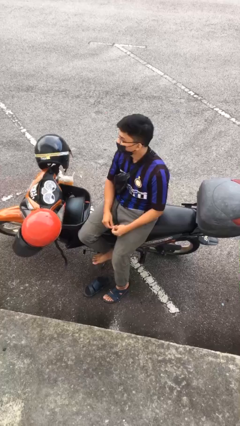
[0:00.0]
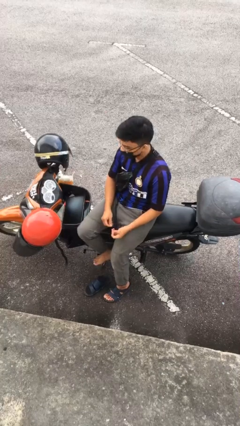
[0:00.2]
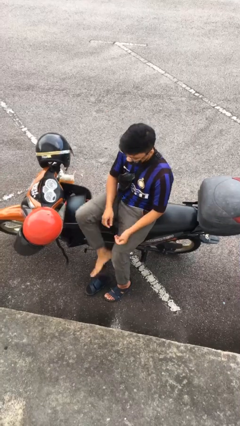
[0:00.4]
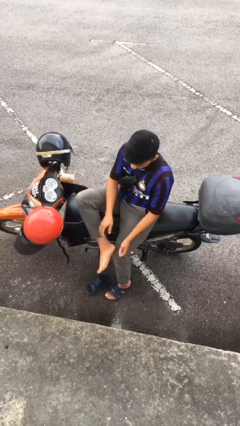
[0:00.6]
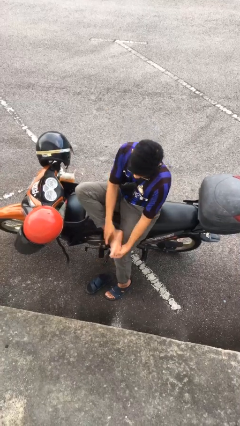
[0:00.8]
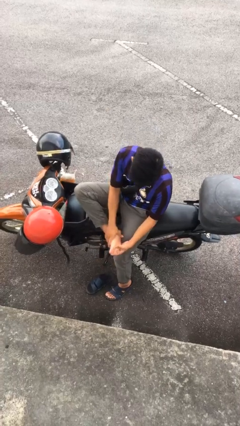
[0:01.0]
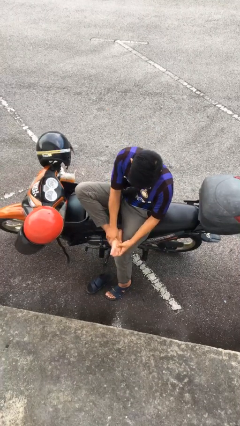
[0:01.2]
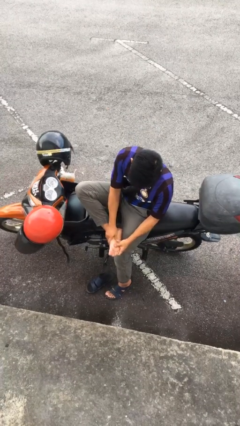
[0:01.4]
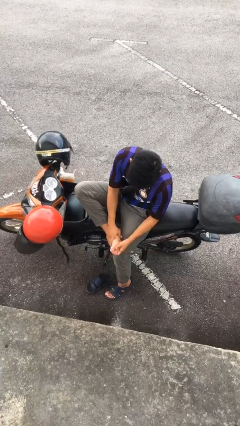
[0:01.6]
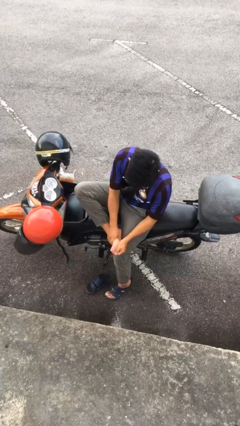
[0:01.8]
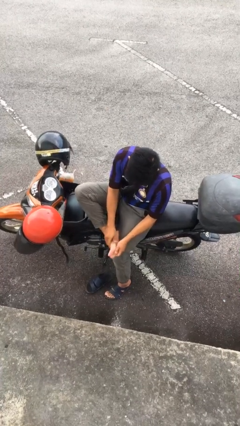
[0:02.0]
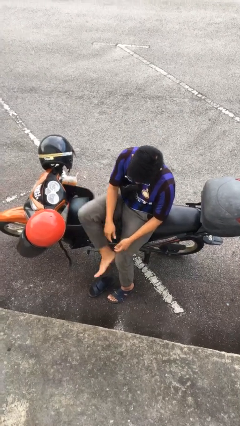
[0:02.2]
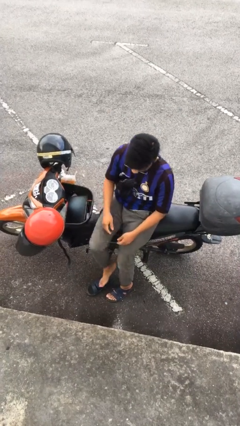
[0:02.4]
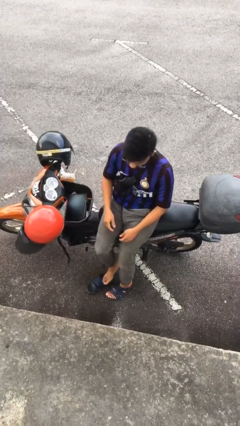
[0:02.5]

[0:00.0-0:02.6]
person rubs foot

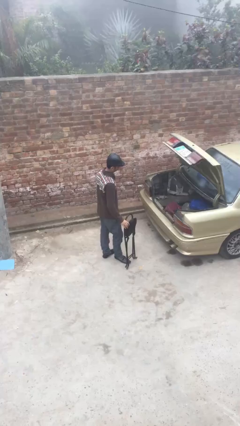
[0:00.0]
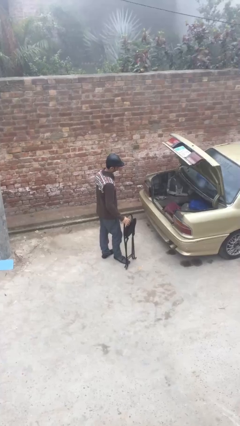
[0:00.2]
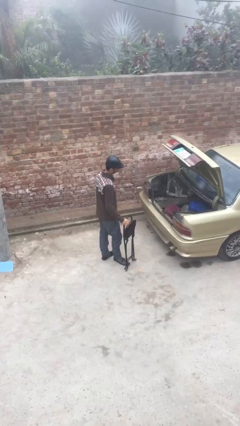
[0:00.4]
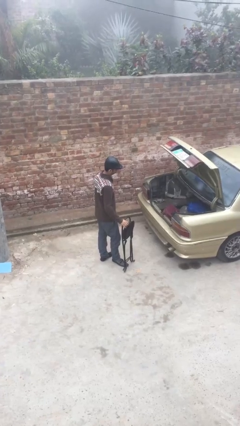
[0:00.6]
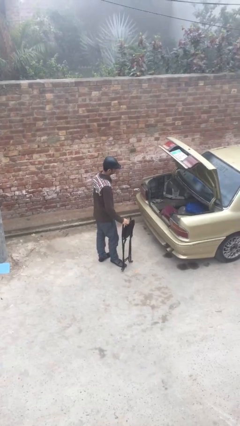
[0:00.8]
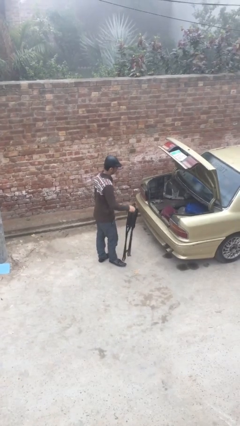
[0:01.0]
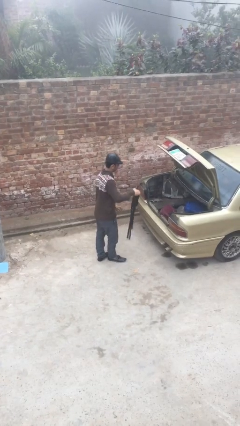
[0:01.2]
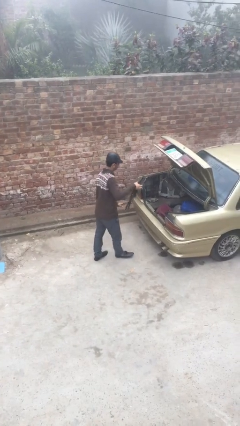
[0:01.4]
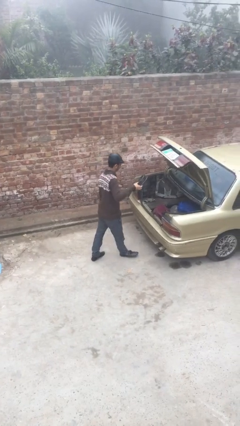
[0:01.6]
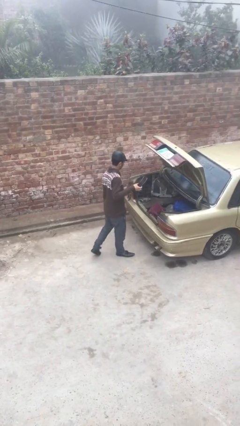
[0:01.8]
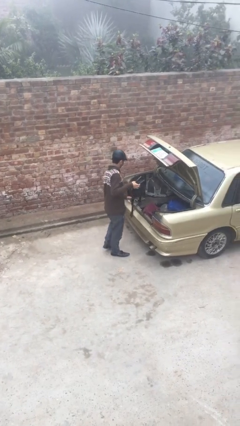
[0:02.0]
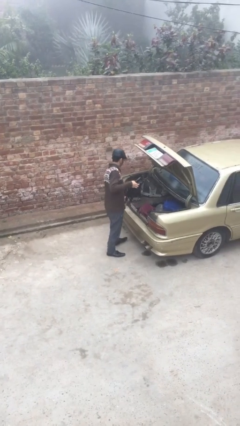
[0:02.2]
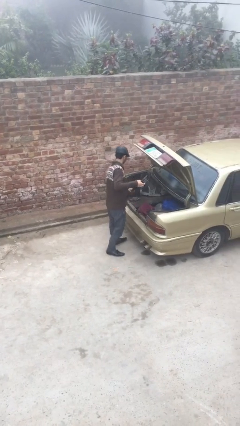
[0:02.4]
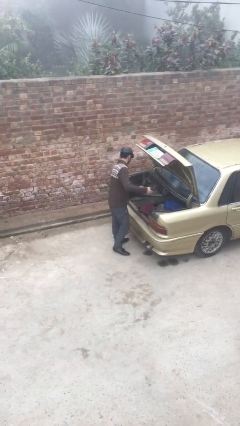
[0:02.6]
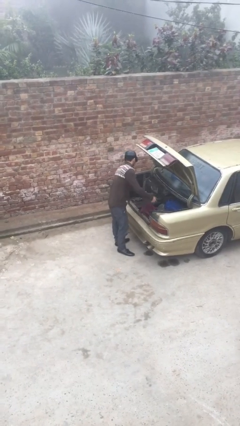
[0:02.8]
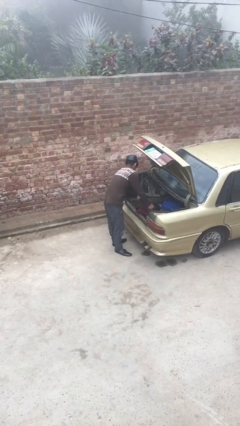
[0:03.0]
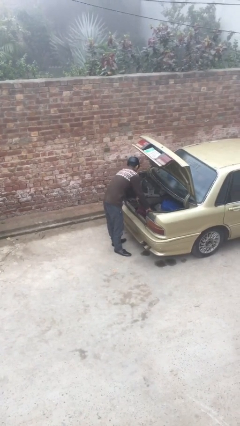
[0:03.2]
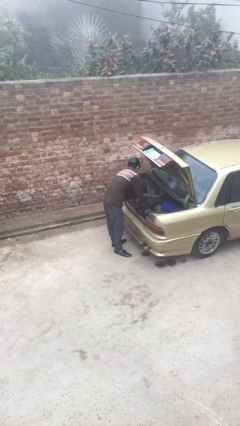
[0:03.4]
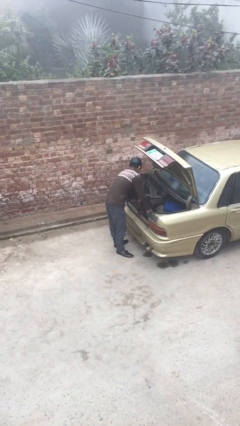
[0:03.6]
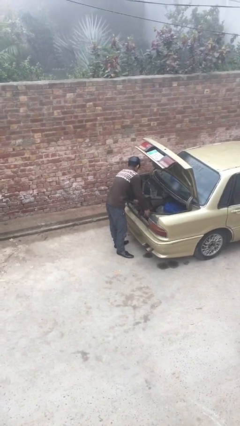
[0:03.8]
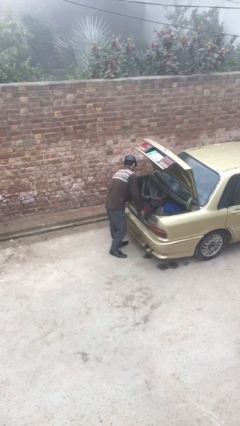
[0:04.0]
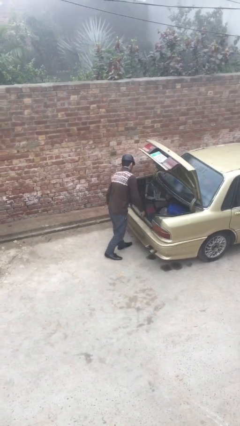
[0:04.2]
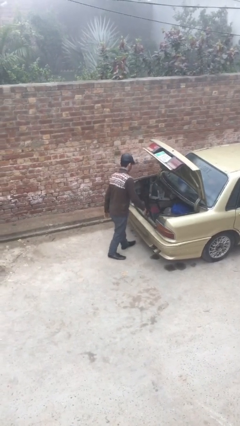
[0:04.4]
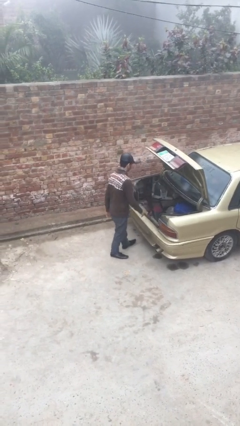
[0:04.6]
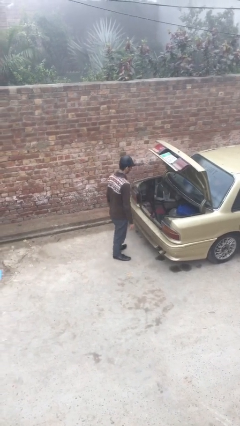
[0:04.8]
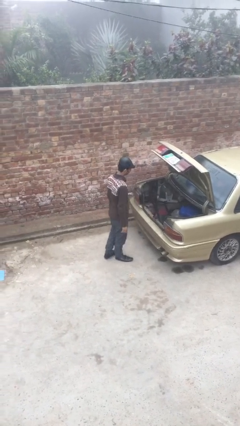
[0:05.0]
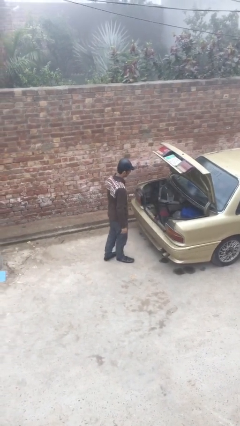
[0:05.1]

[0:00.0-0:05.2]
person loads car

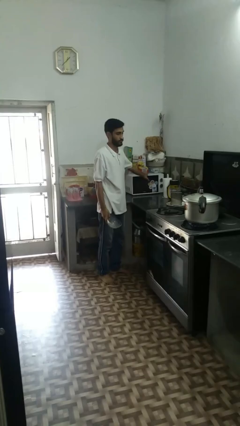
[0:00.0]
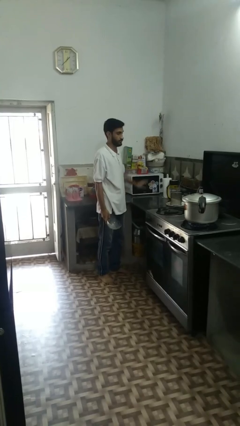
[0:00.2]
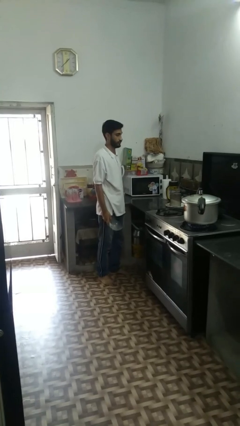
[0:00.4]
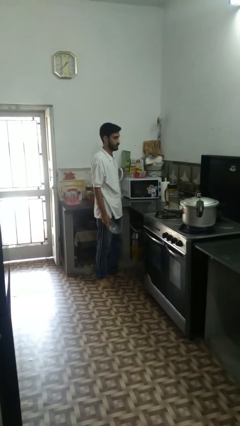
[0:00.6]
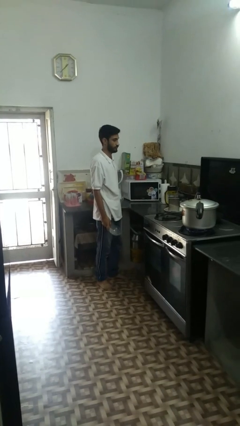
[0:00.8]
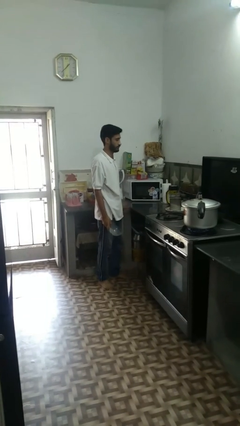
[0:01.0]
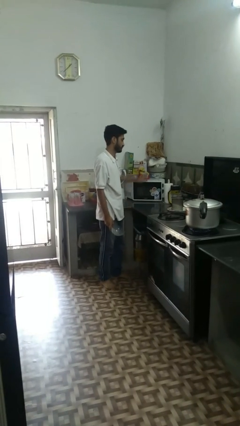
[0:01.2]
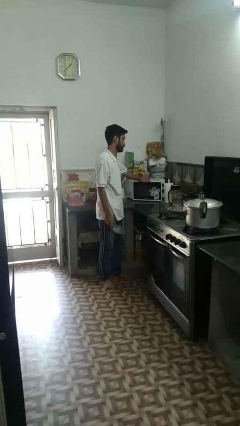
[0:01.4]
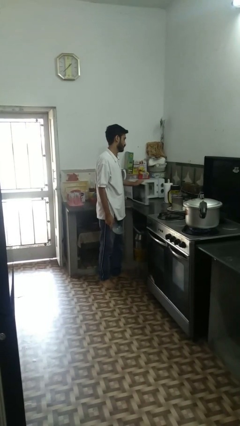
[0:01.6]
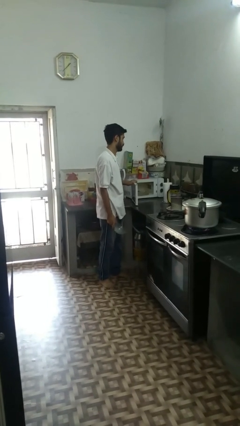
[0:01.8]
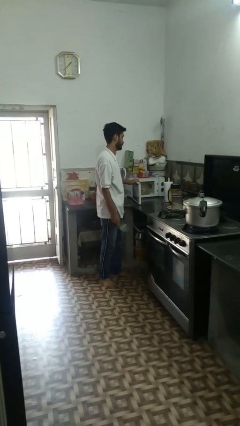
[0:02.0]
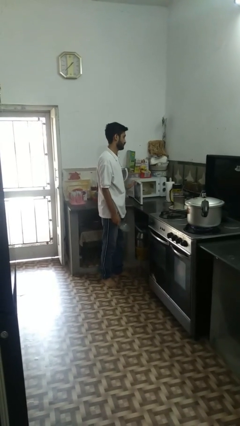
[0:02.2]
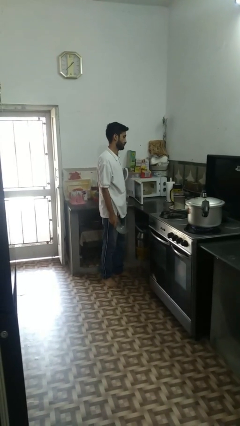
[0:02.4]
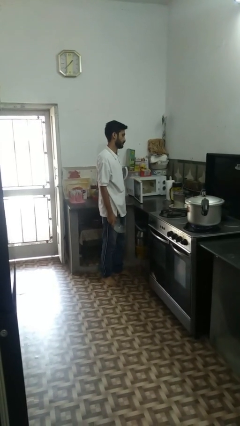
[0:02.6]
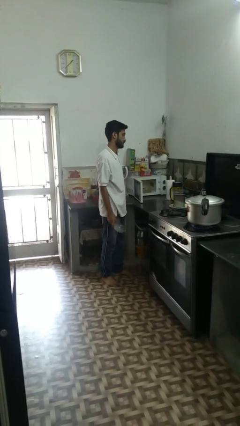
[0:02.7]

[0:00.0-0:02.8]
person opens microwave

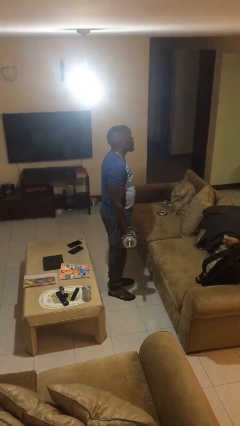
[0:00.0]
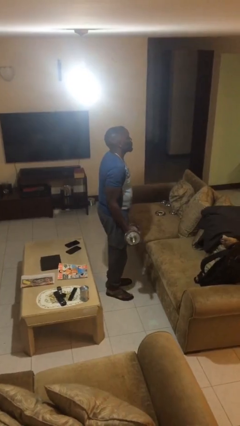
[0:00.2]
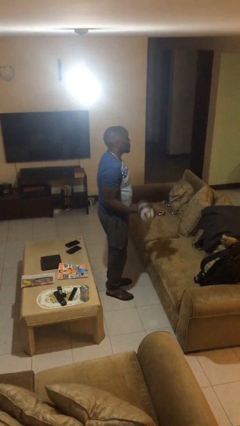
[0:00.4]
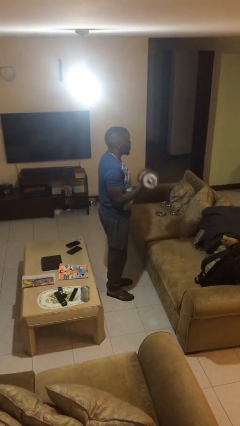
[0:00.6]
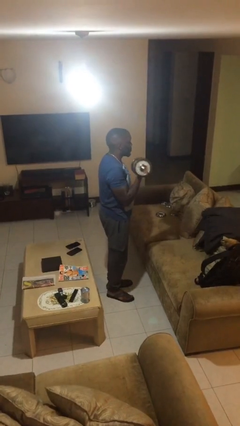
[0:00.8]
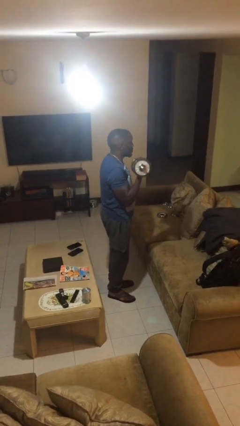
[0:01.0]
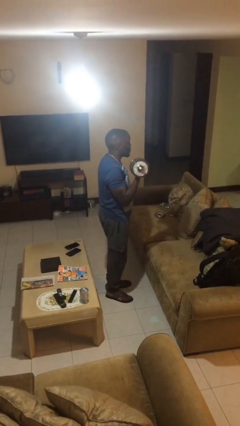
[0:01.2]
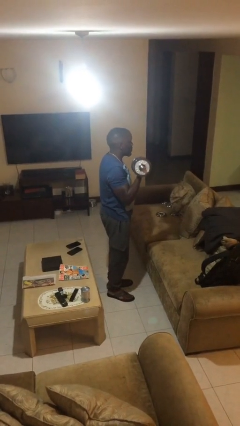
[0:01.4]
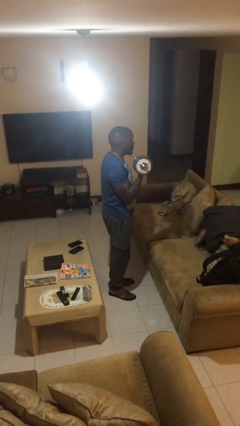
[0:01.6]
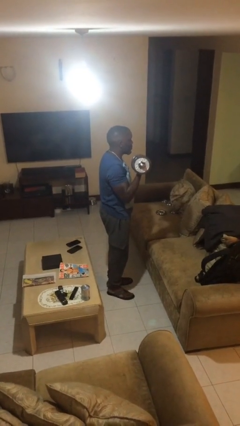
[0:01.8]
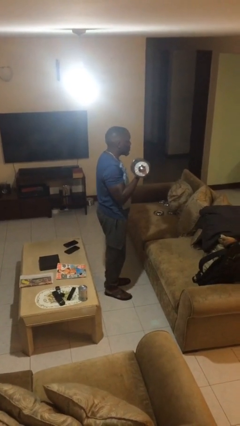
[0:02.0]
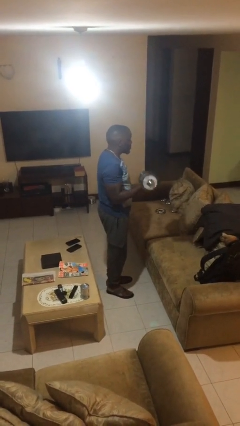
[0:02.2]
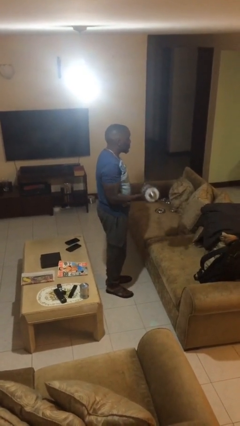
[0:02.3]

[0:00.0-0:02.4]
person lifts dumbbells

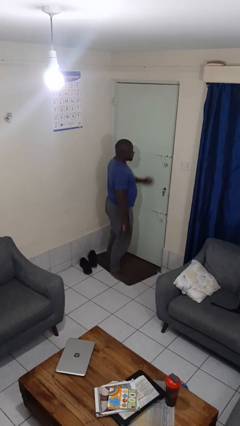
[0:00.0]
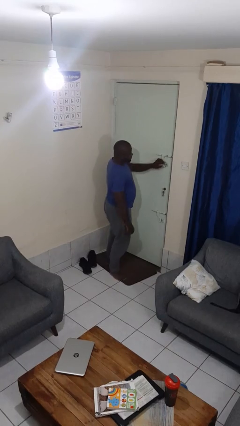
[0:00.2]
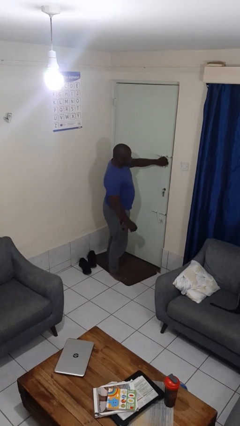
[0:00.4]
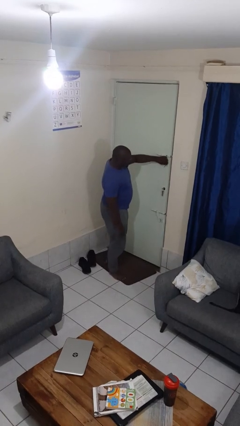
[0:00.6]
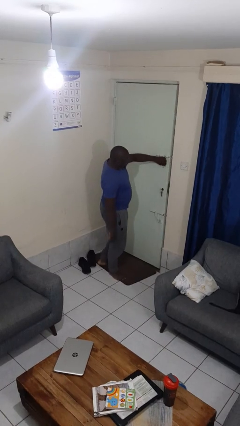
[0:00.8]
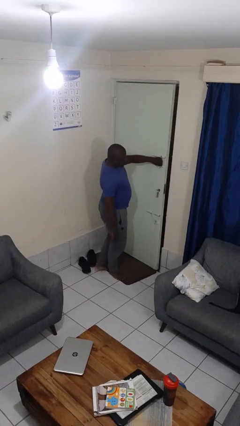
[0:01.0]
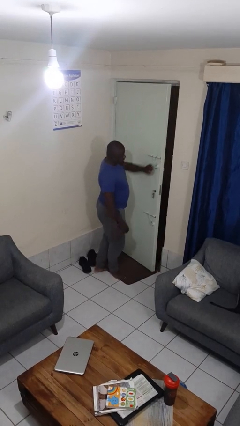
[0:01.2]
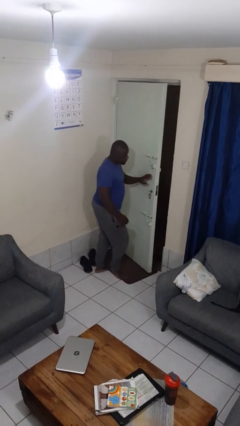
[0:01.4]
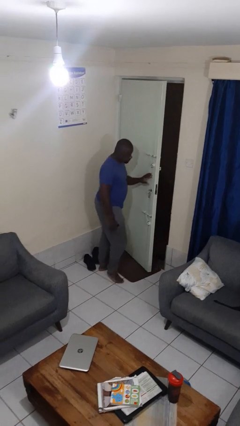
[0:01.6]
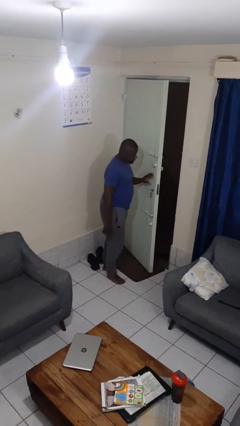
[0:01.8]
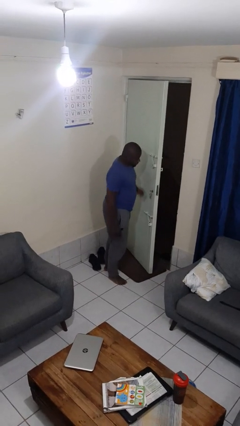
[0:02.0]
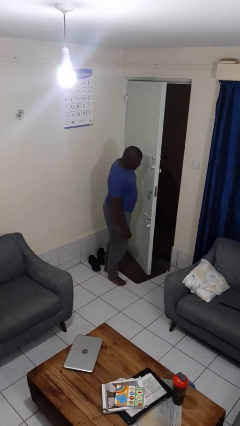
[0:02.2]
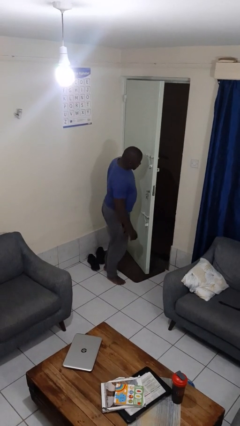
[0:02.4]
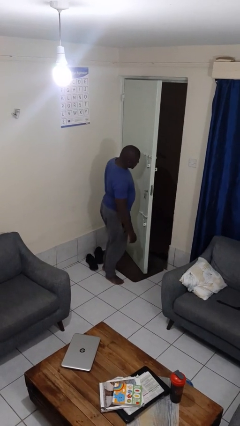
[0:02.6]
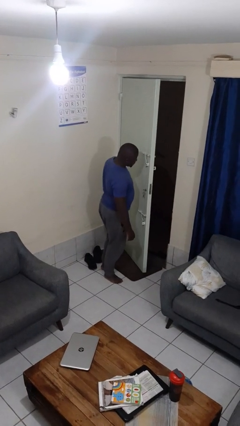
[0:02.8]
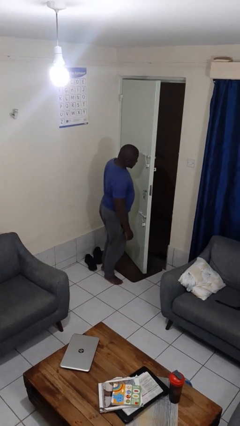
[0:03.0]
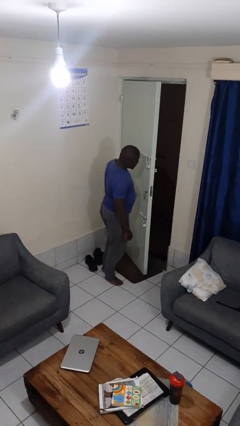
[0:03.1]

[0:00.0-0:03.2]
person opens facility door

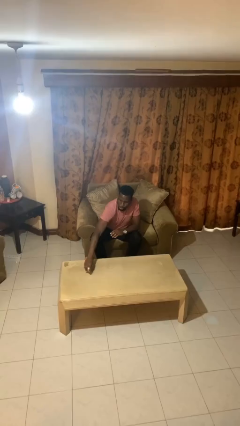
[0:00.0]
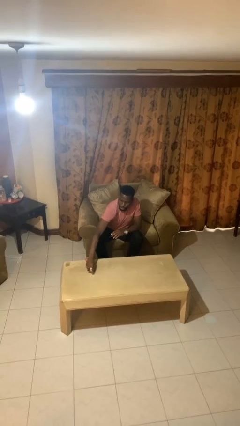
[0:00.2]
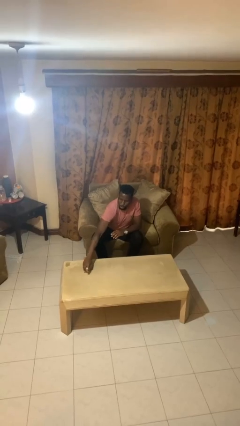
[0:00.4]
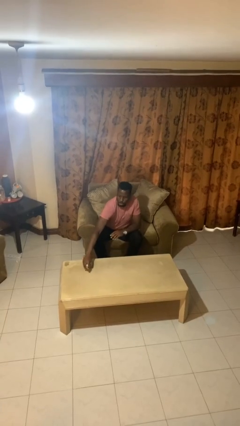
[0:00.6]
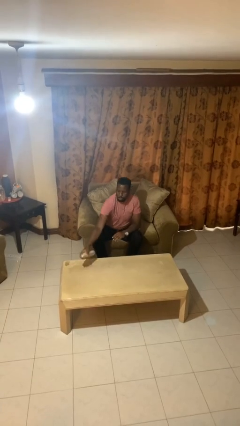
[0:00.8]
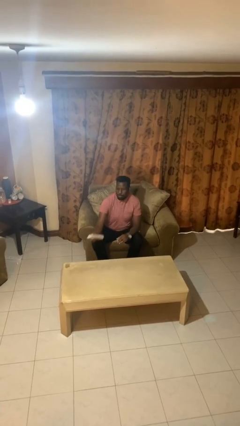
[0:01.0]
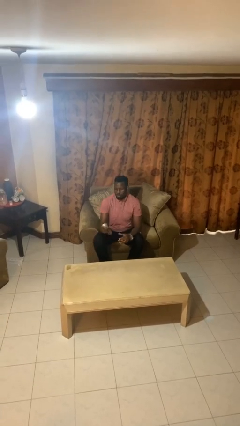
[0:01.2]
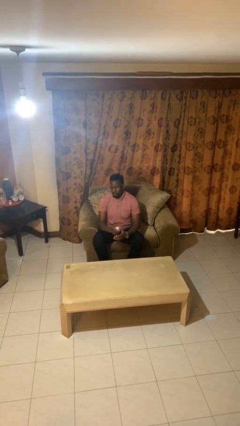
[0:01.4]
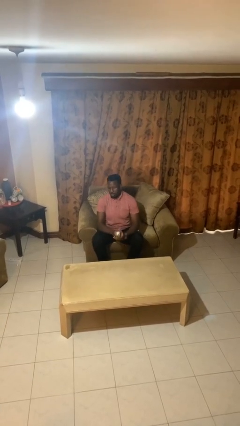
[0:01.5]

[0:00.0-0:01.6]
person sprays from bottle
